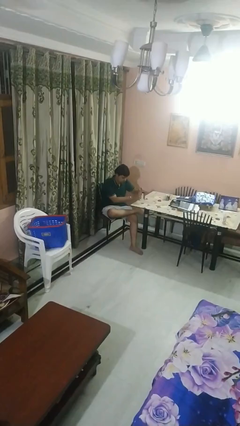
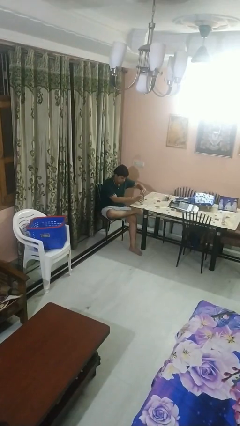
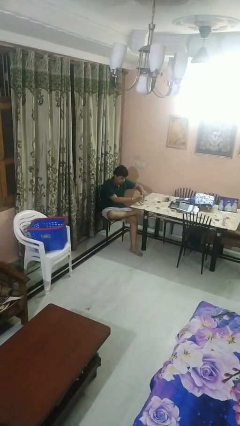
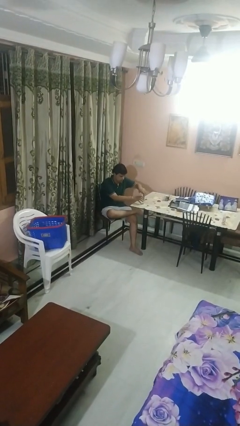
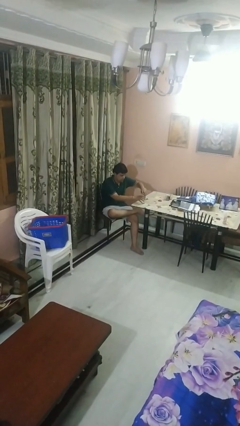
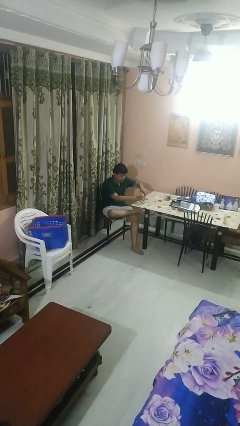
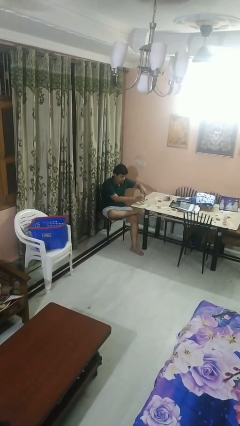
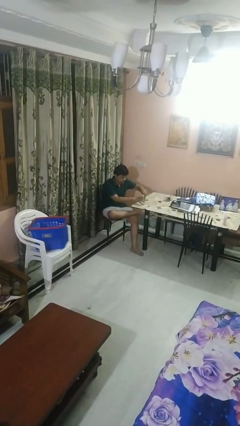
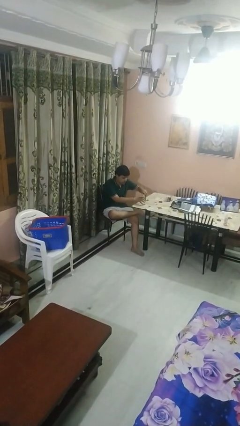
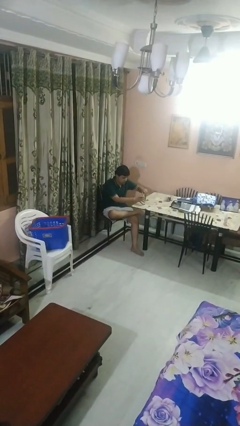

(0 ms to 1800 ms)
person unscrews lid from bottle

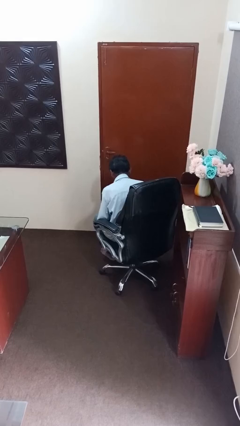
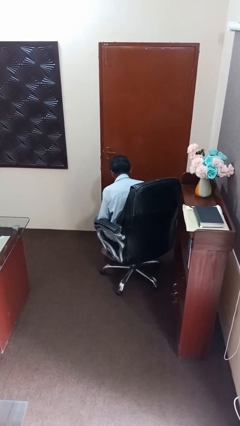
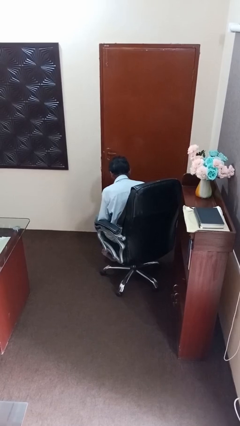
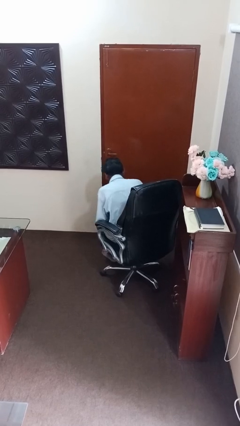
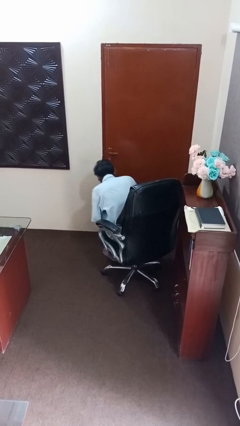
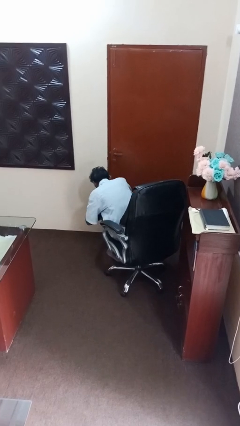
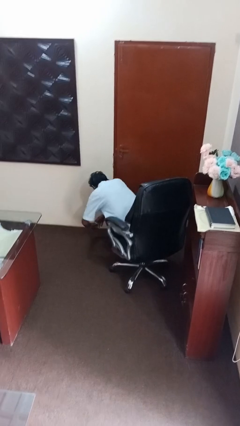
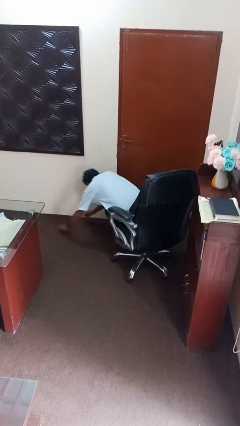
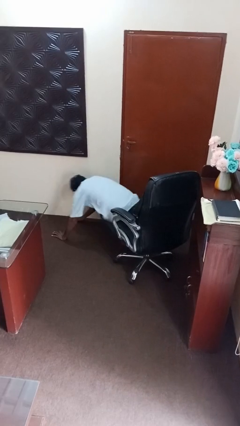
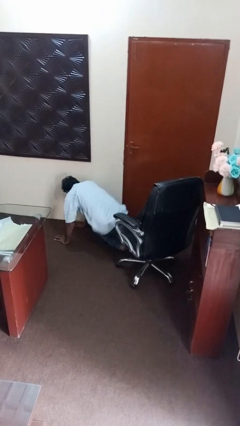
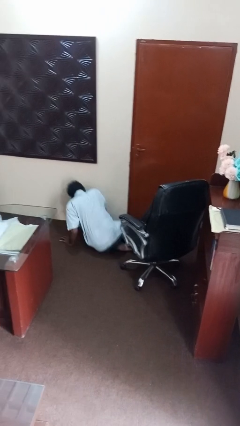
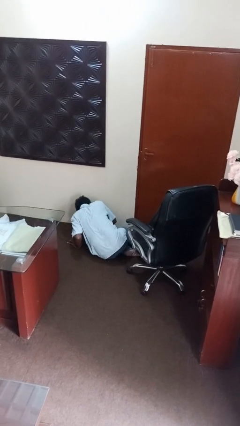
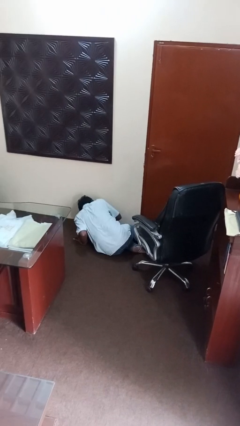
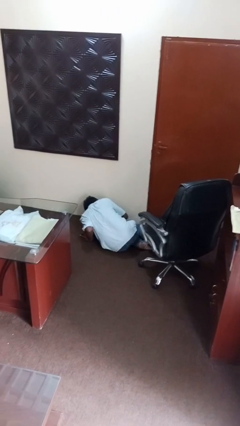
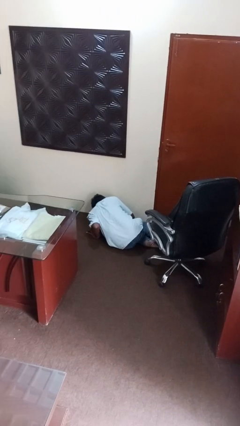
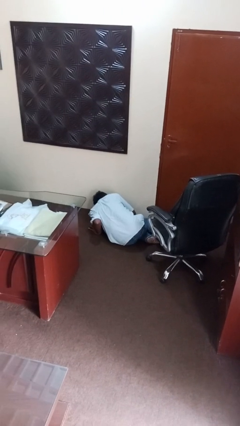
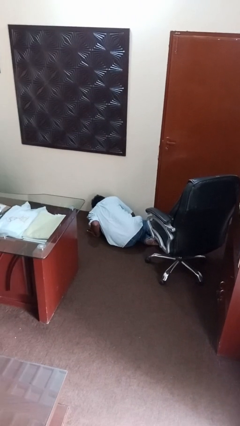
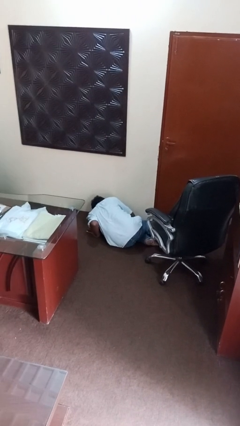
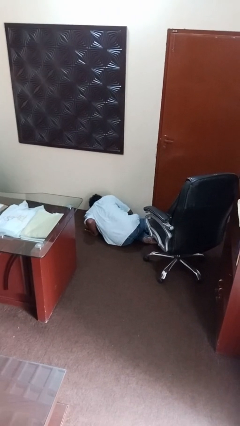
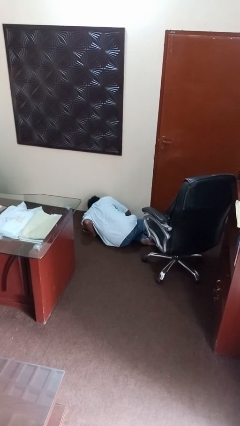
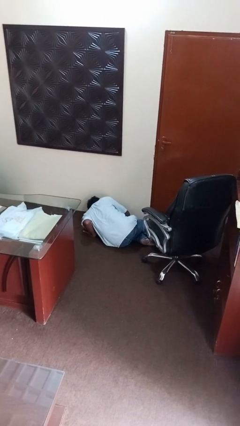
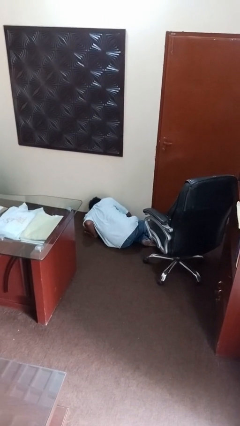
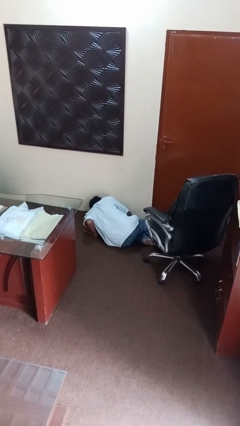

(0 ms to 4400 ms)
person falls from chair

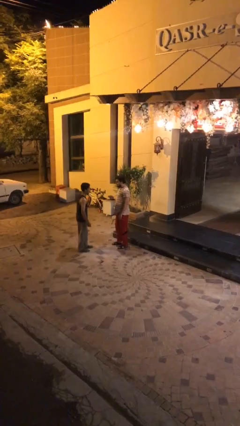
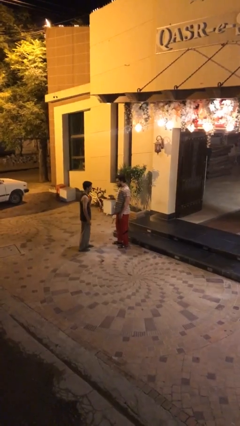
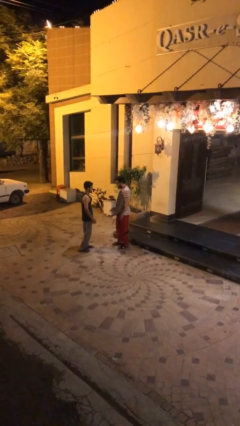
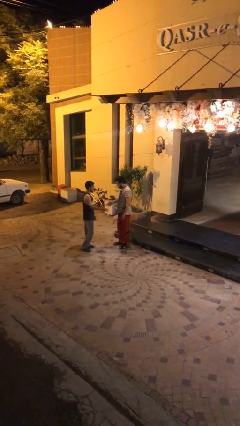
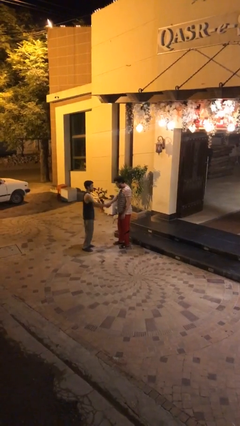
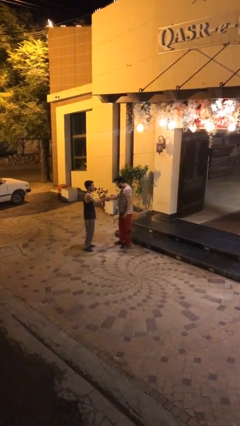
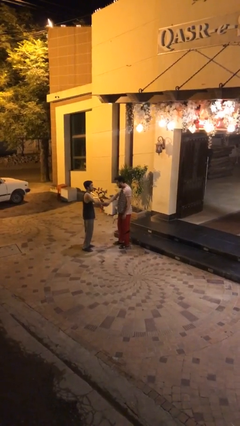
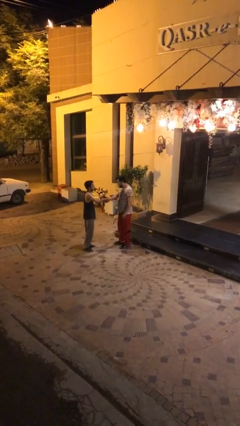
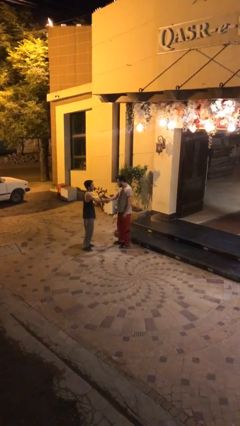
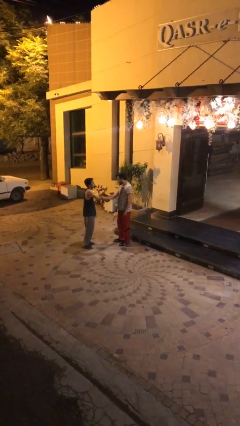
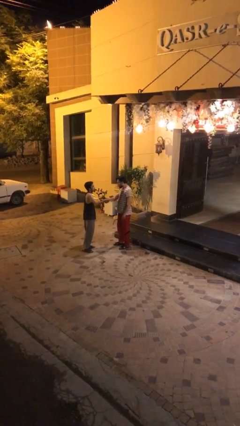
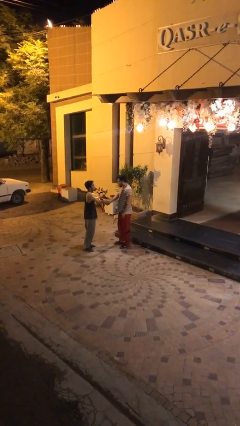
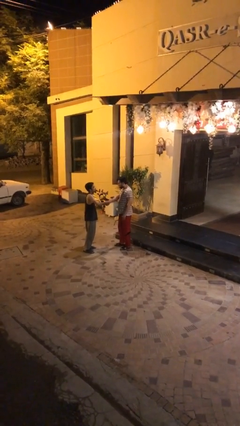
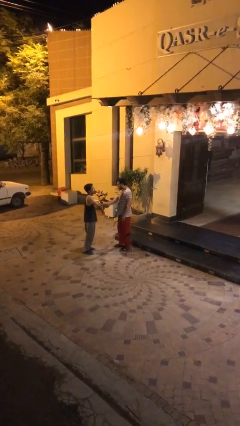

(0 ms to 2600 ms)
person shakes hand

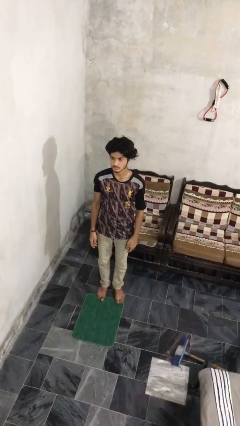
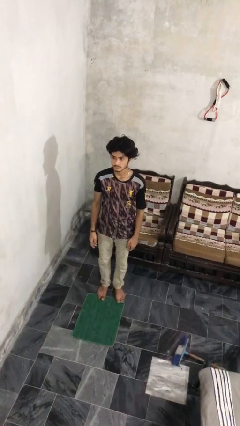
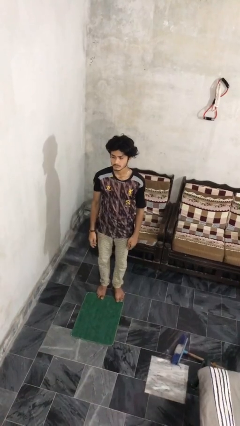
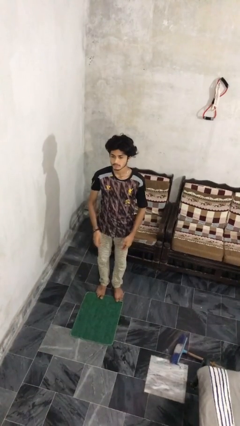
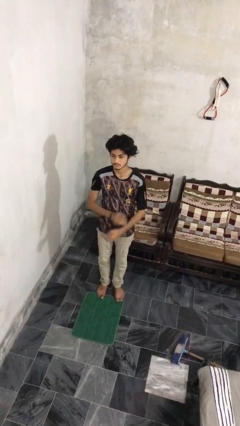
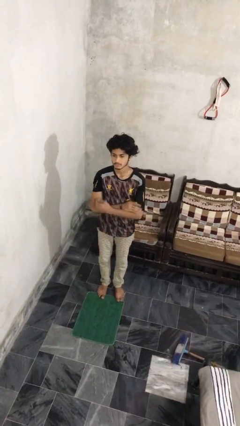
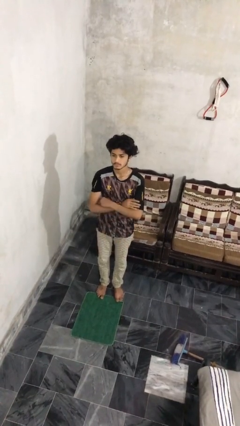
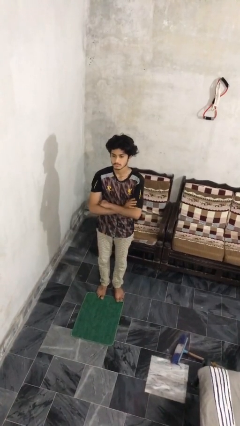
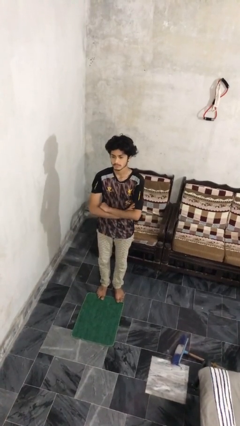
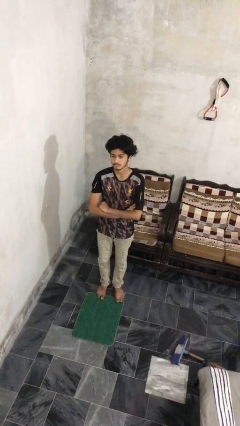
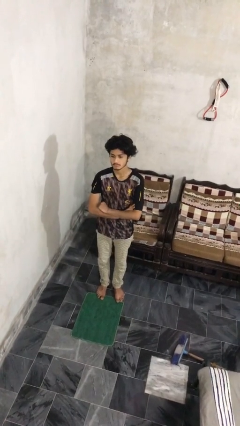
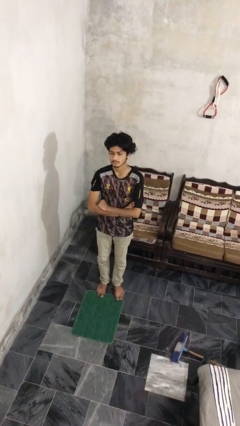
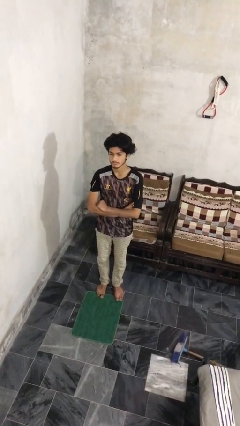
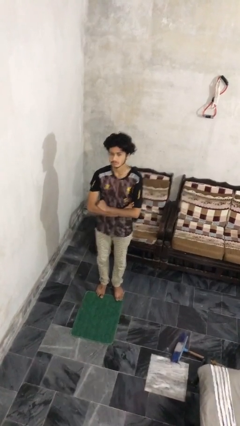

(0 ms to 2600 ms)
person crosses arms

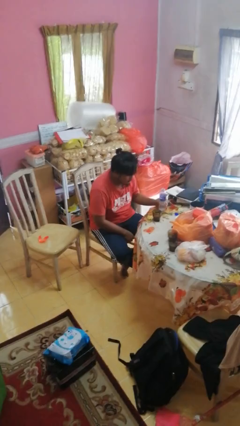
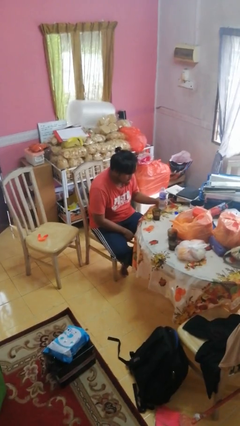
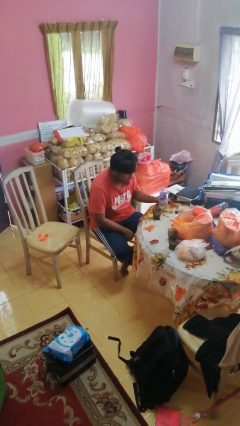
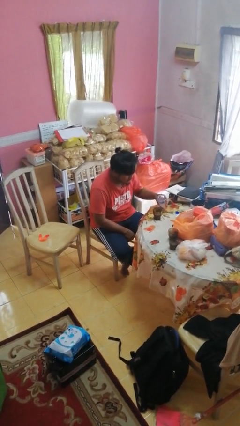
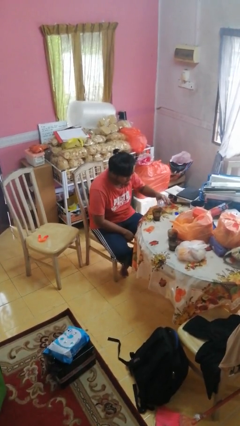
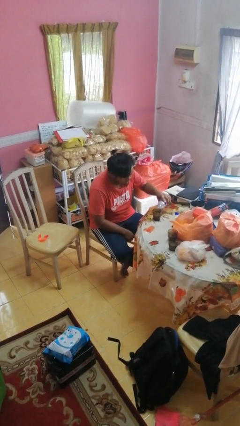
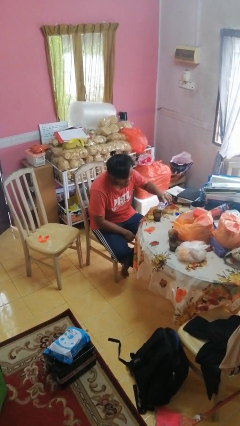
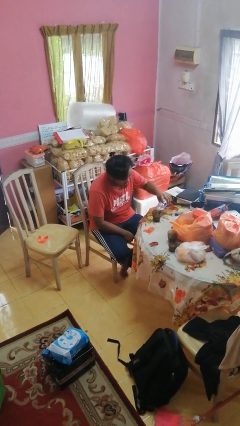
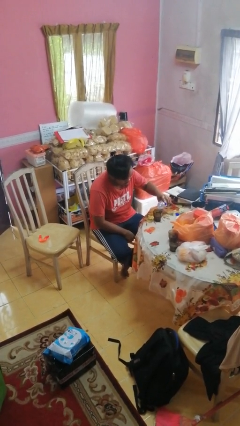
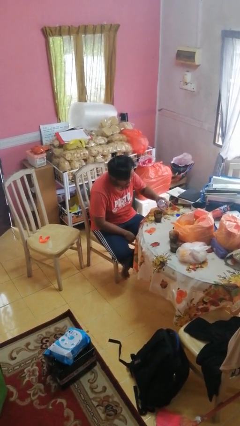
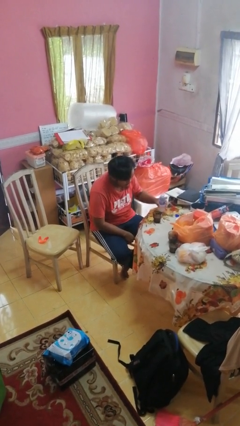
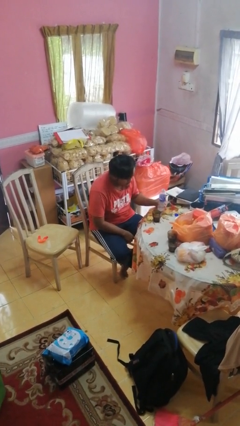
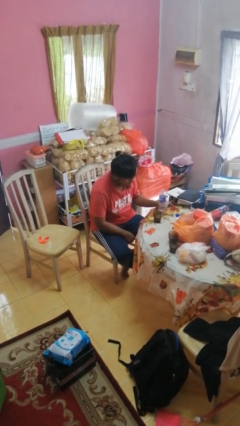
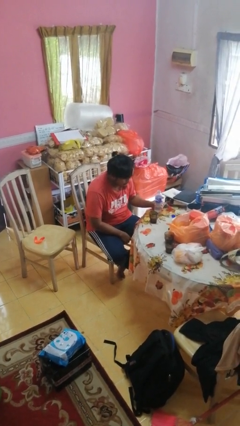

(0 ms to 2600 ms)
person pours liquid into cup

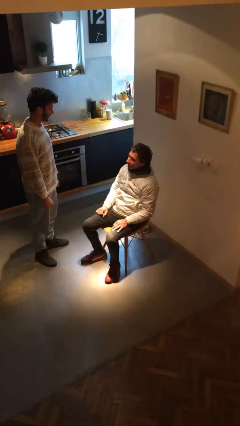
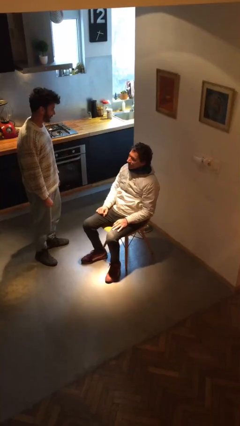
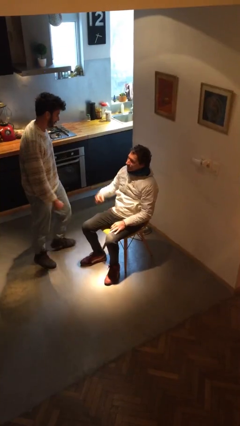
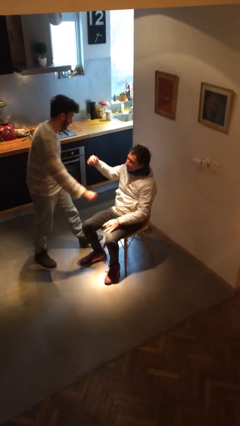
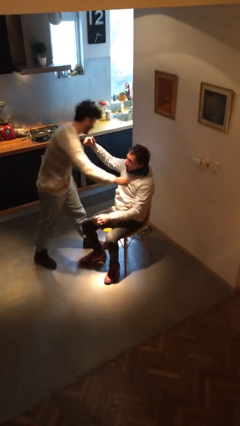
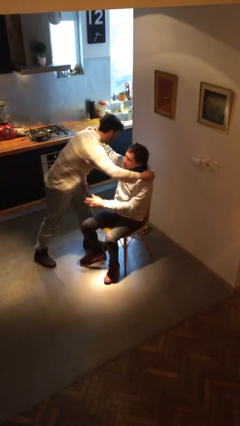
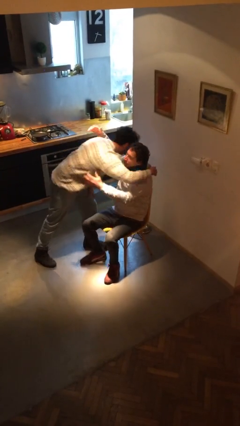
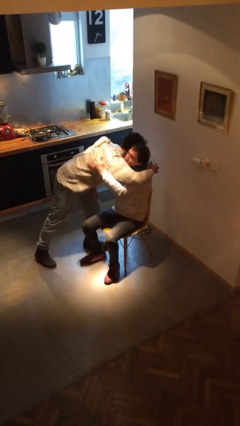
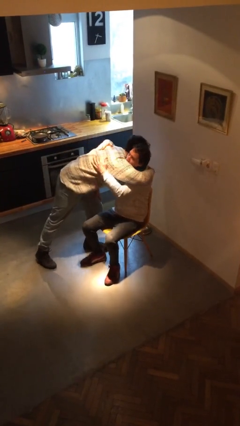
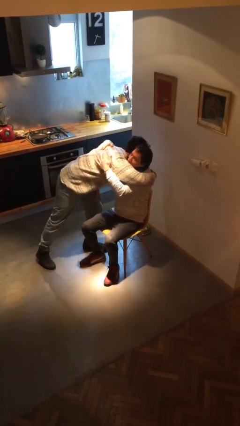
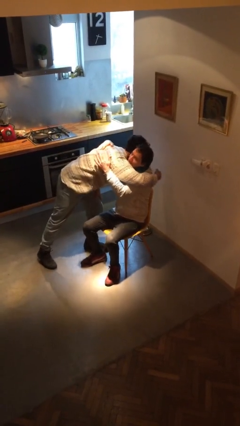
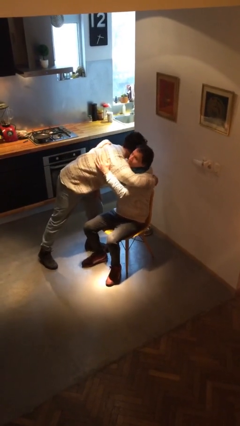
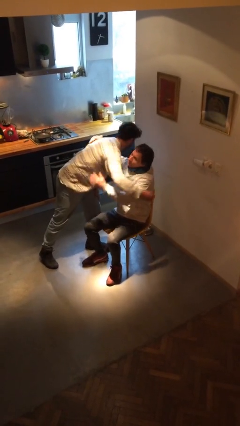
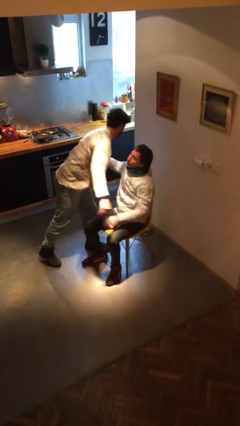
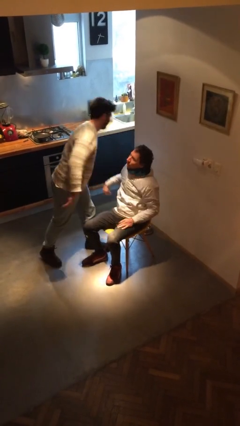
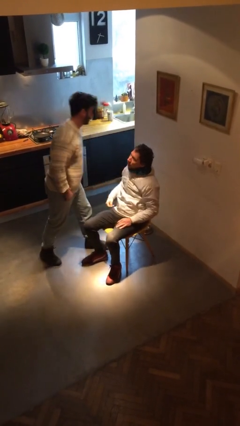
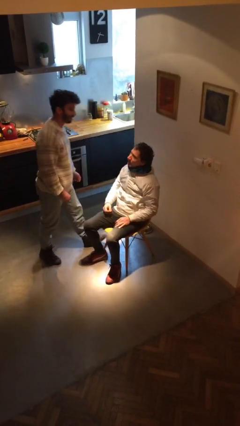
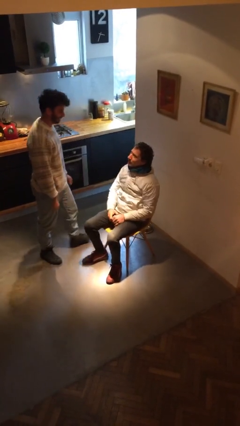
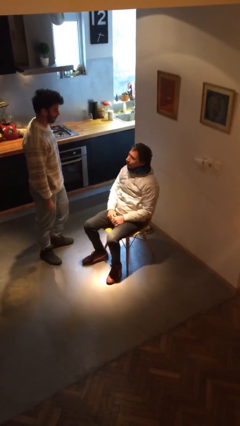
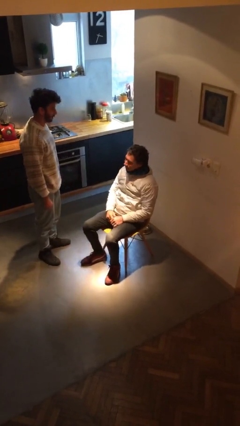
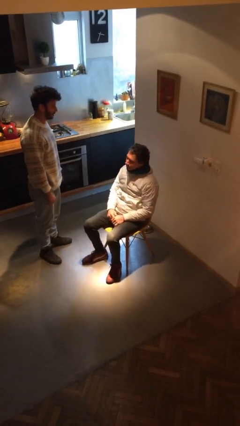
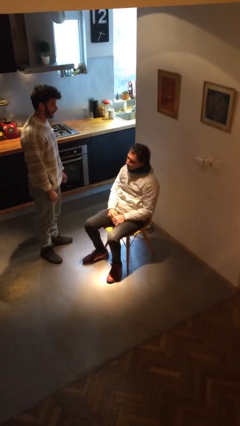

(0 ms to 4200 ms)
person embraces person
